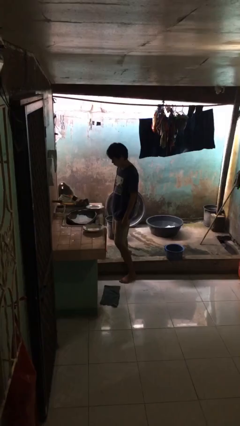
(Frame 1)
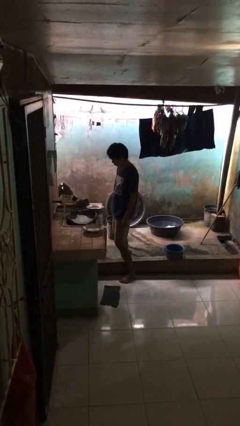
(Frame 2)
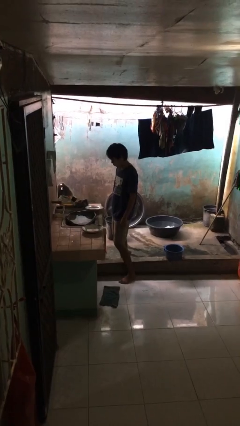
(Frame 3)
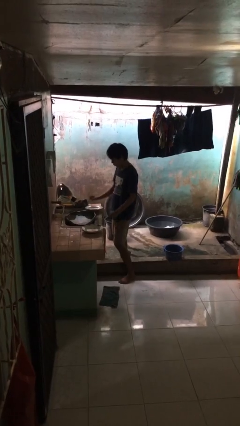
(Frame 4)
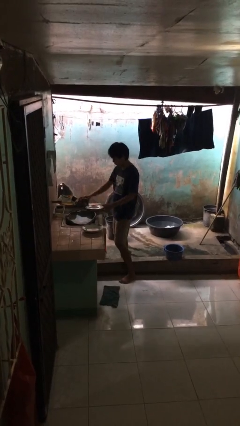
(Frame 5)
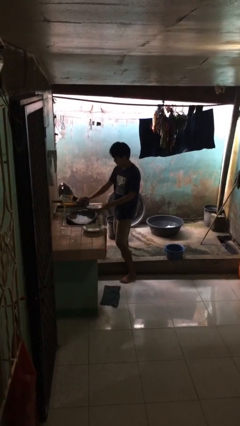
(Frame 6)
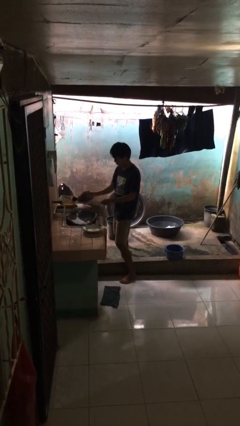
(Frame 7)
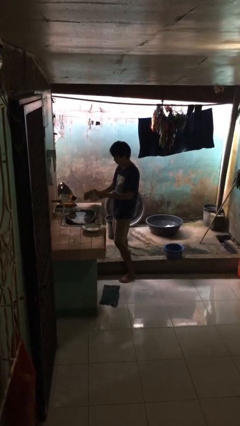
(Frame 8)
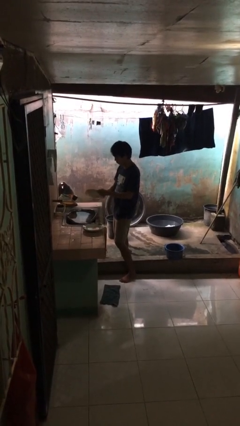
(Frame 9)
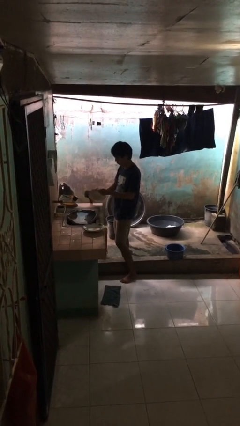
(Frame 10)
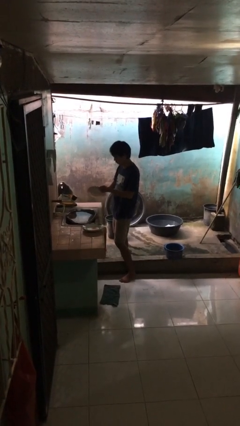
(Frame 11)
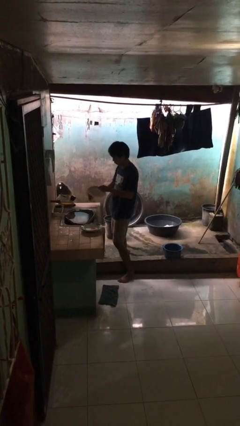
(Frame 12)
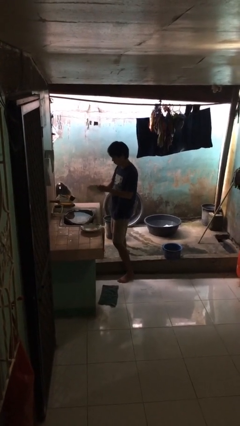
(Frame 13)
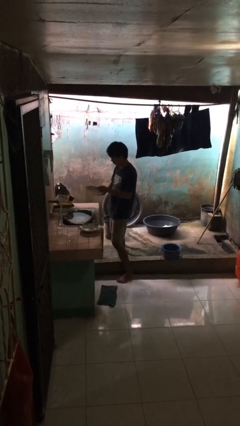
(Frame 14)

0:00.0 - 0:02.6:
person dries dish

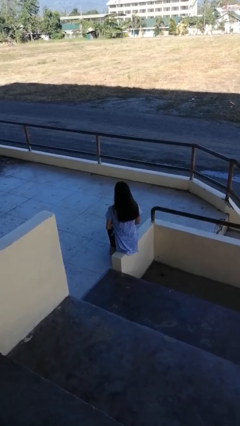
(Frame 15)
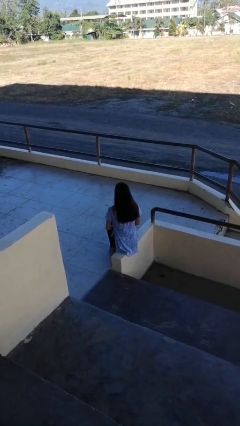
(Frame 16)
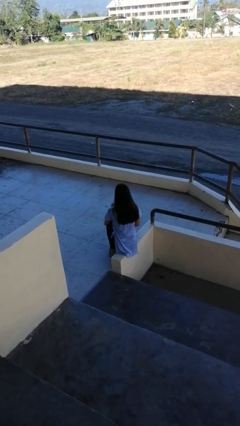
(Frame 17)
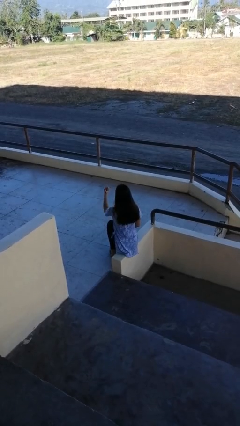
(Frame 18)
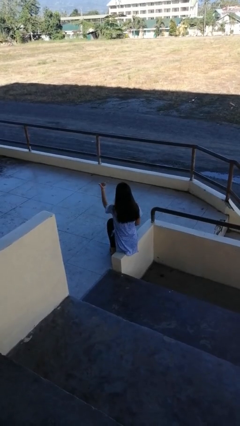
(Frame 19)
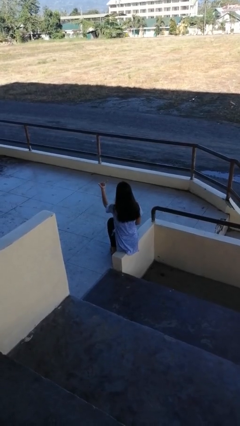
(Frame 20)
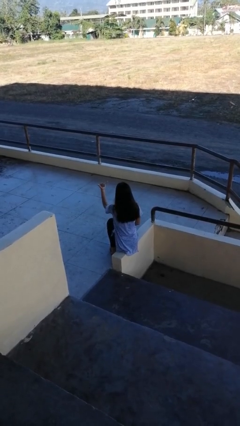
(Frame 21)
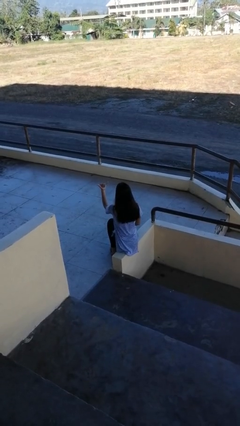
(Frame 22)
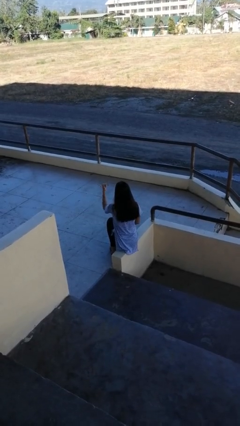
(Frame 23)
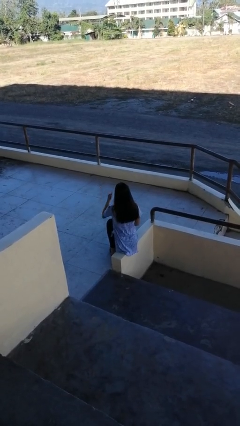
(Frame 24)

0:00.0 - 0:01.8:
person gestures hang loose

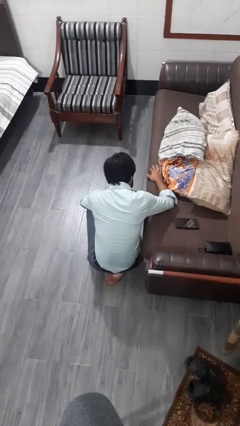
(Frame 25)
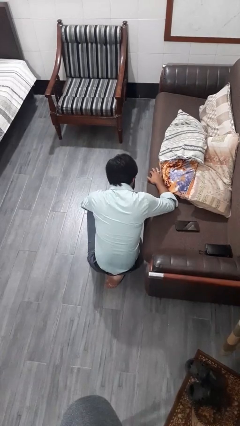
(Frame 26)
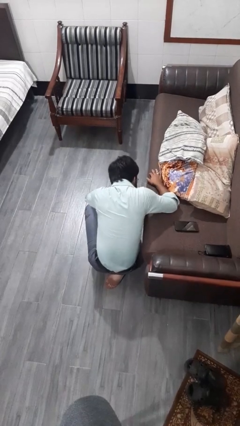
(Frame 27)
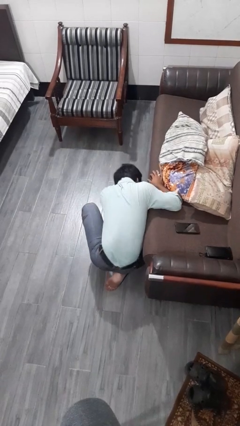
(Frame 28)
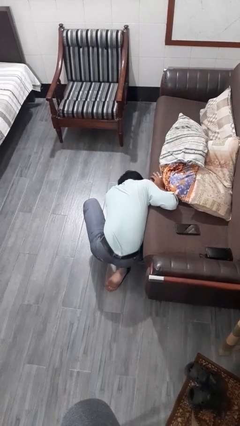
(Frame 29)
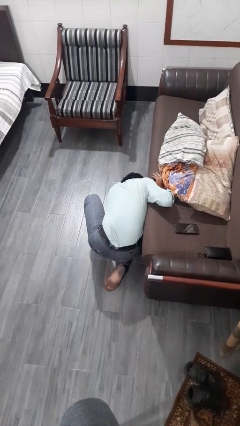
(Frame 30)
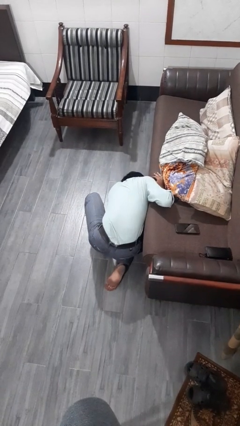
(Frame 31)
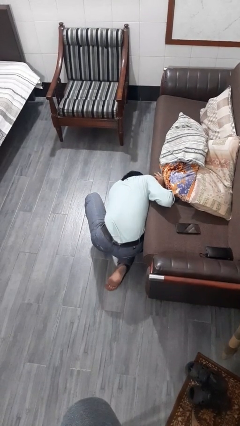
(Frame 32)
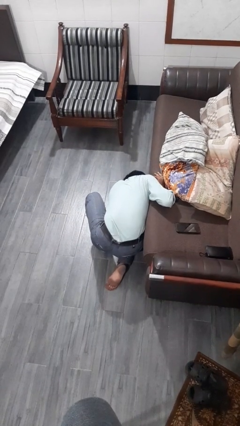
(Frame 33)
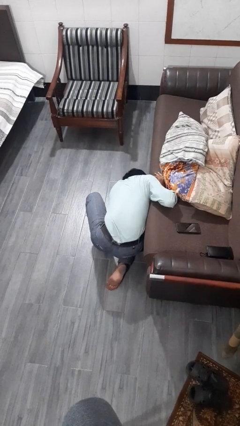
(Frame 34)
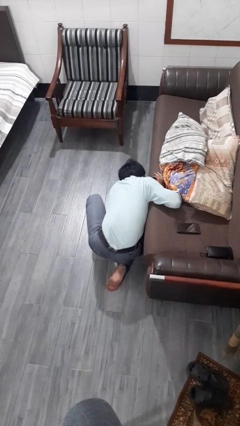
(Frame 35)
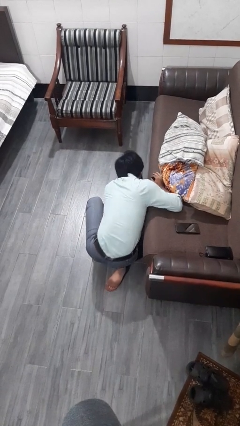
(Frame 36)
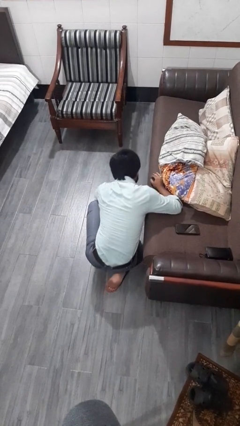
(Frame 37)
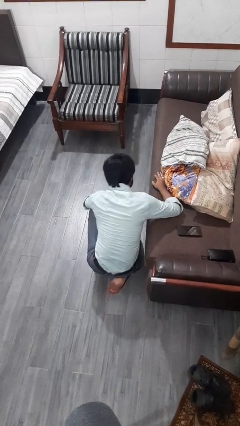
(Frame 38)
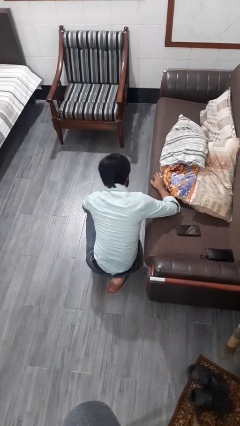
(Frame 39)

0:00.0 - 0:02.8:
person searches under couch

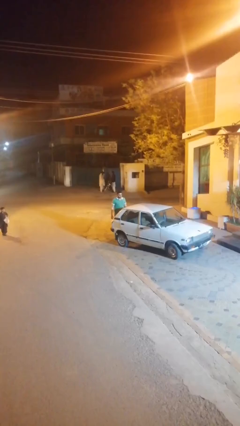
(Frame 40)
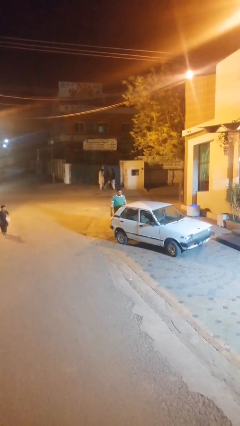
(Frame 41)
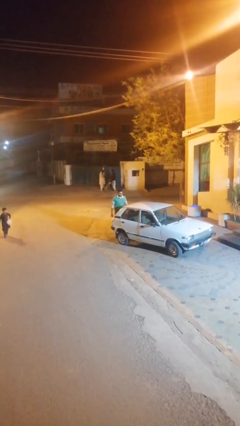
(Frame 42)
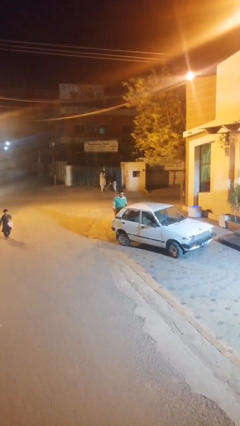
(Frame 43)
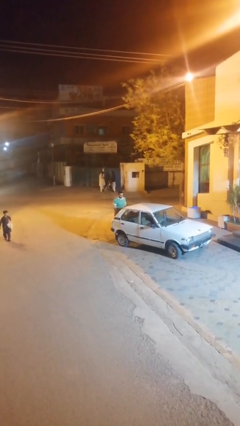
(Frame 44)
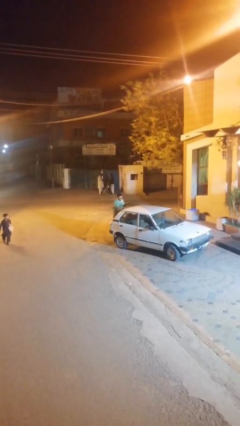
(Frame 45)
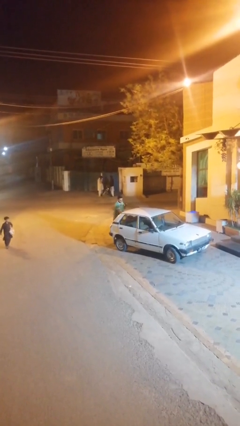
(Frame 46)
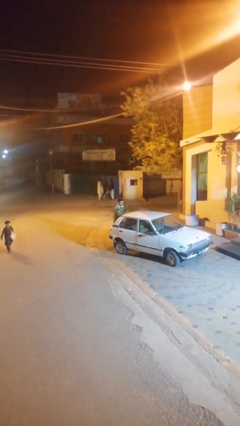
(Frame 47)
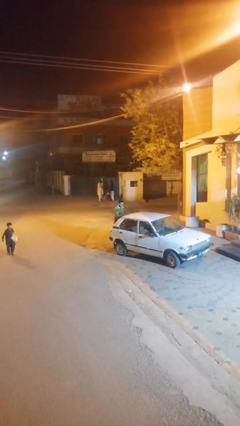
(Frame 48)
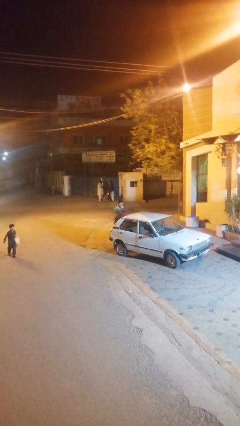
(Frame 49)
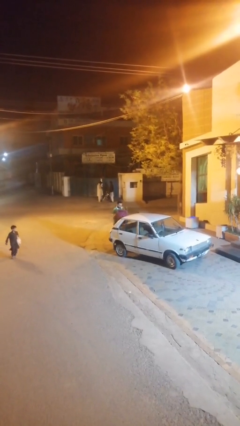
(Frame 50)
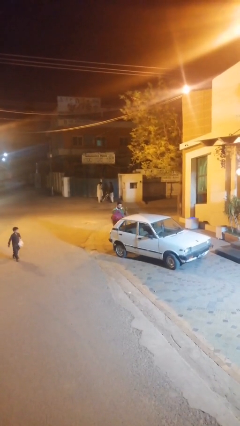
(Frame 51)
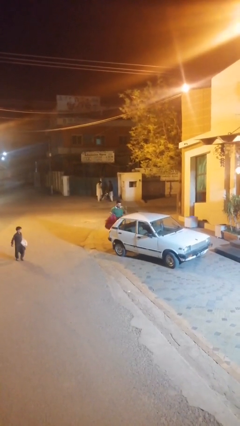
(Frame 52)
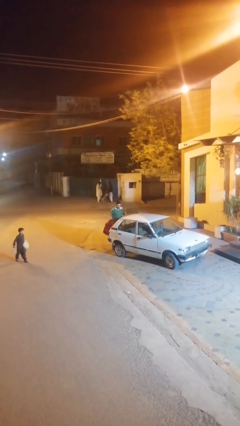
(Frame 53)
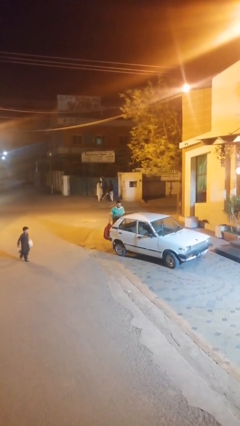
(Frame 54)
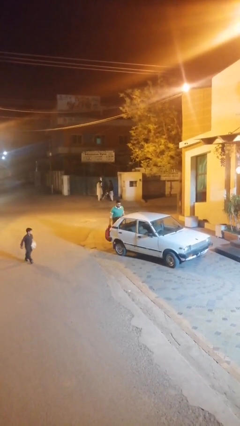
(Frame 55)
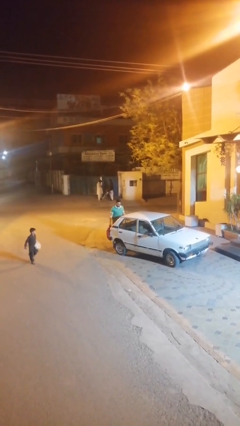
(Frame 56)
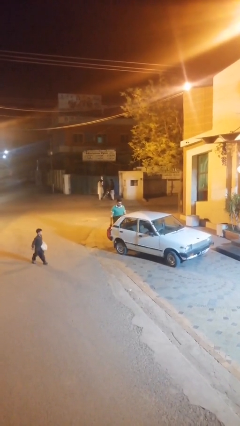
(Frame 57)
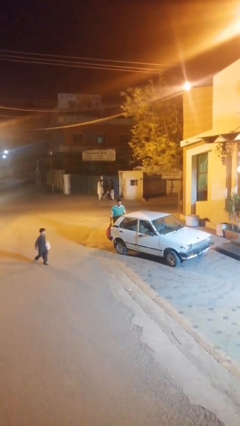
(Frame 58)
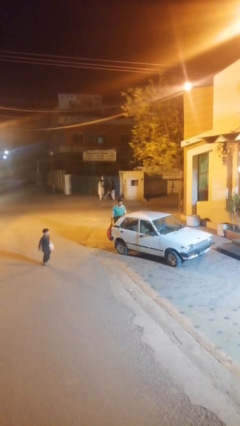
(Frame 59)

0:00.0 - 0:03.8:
person unloads car

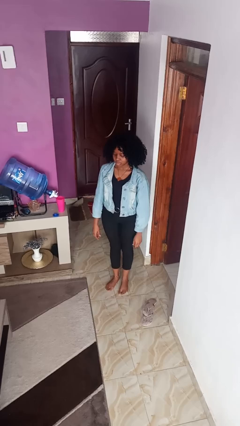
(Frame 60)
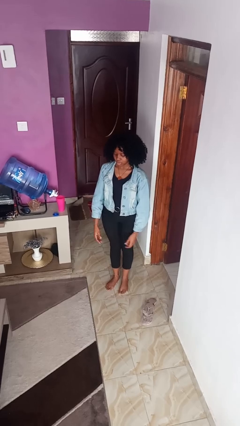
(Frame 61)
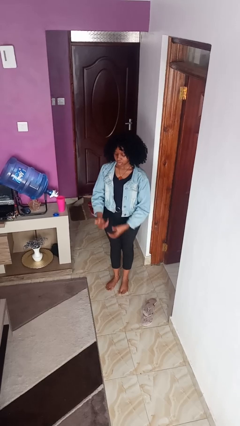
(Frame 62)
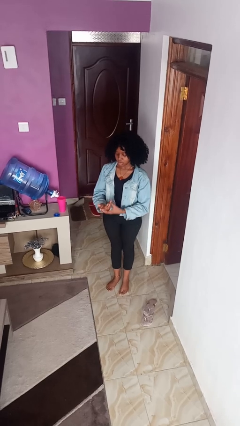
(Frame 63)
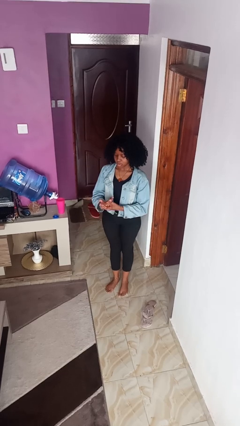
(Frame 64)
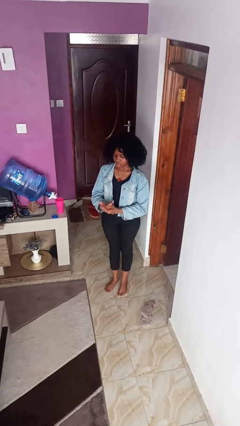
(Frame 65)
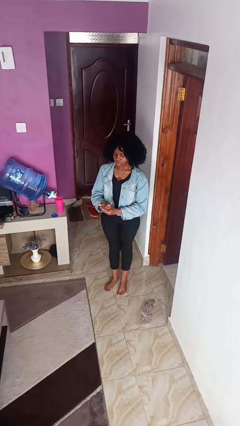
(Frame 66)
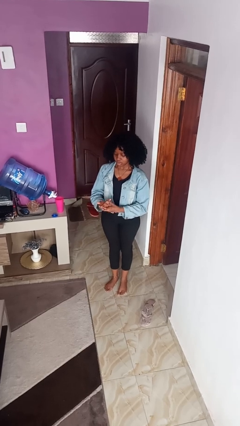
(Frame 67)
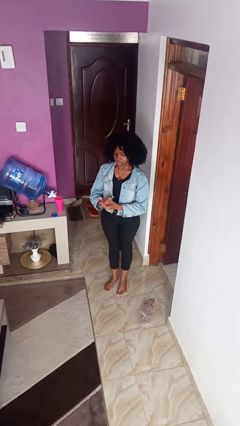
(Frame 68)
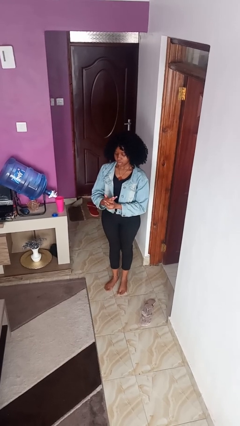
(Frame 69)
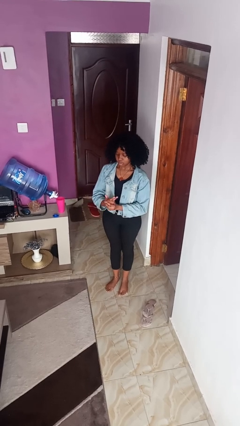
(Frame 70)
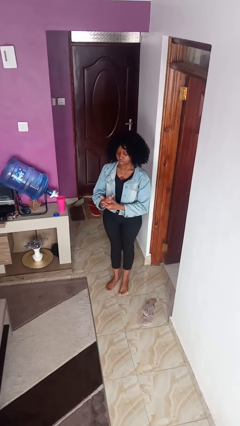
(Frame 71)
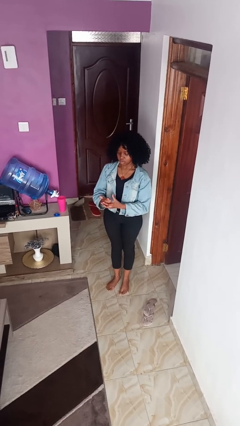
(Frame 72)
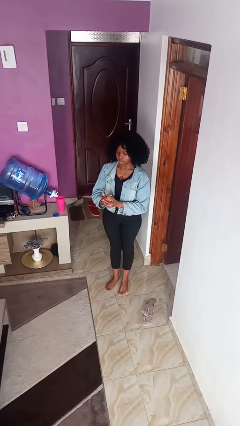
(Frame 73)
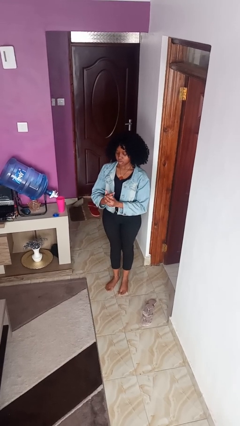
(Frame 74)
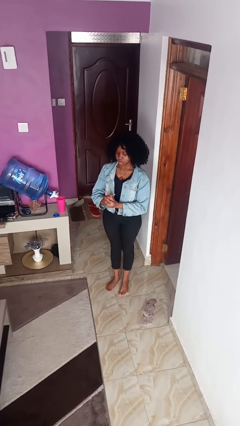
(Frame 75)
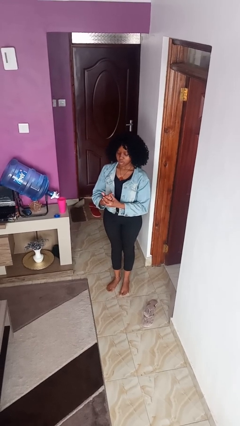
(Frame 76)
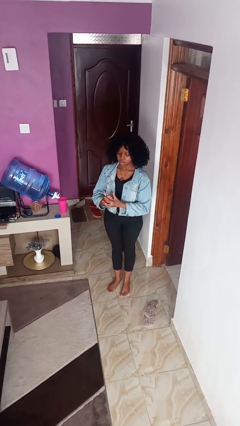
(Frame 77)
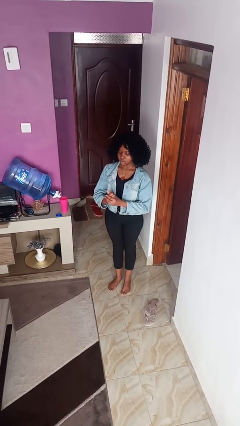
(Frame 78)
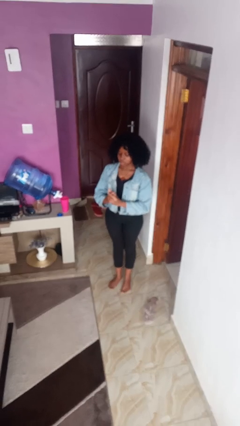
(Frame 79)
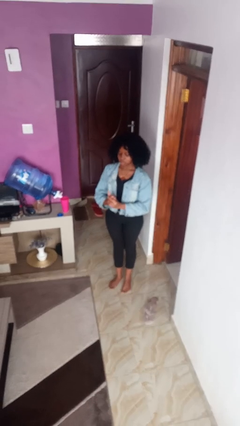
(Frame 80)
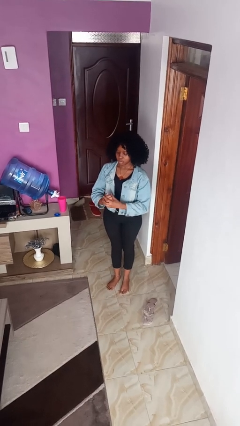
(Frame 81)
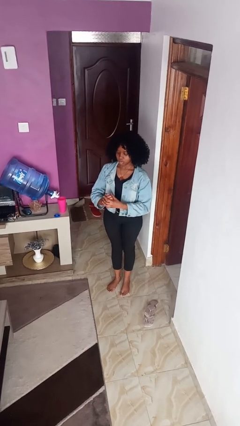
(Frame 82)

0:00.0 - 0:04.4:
person cracks knuckles

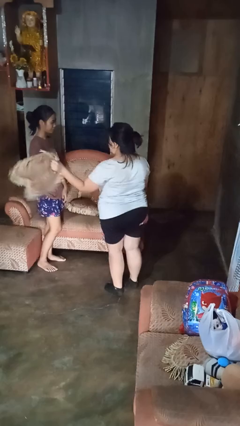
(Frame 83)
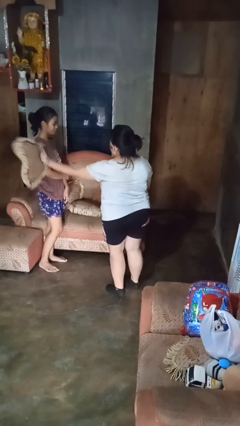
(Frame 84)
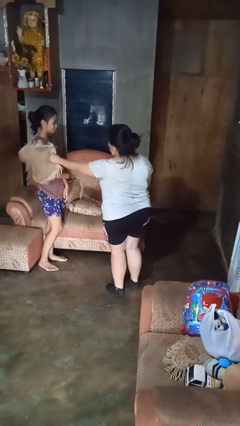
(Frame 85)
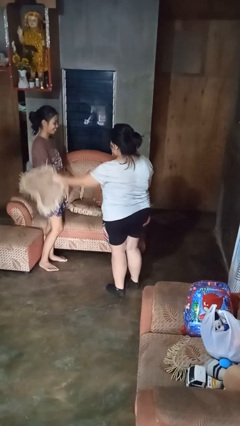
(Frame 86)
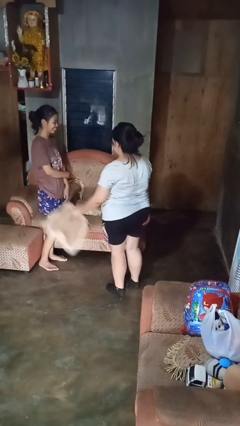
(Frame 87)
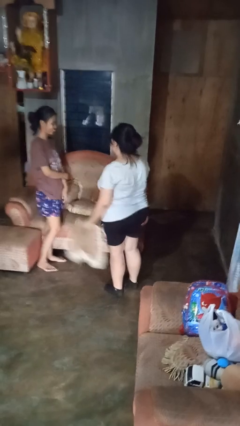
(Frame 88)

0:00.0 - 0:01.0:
person hits person with pillow

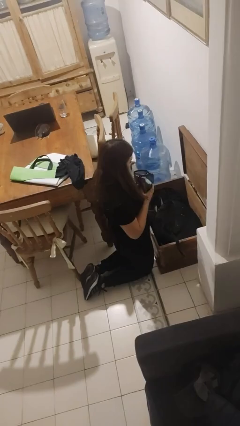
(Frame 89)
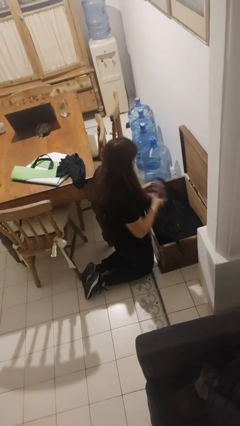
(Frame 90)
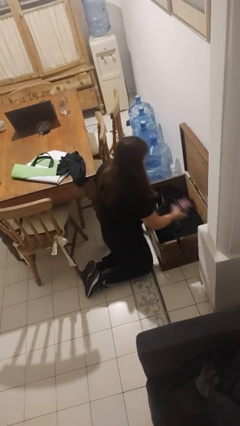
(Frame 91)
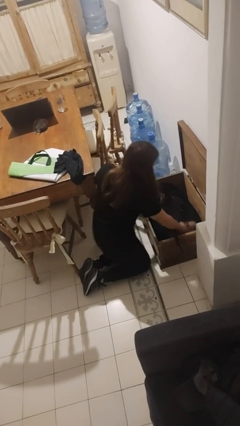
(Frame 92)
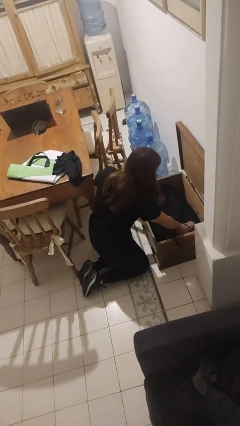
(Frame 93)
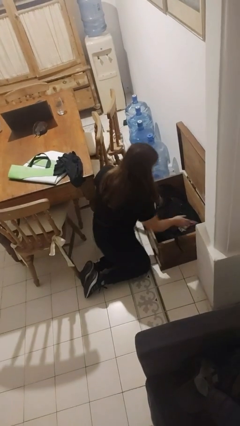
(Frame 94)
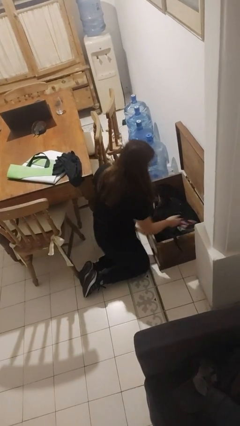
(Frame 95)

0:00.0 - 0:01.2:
person puts object into box
